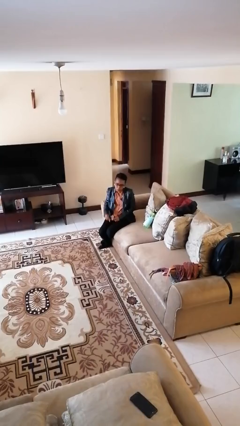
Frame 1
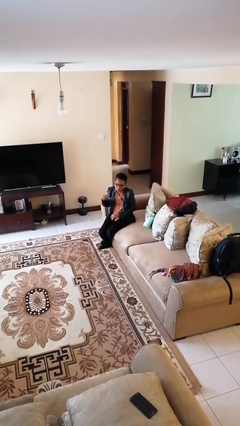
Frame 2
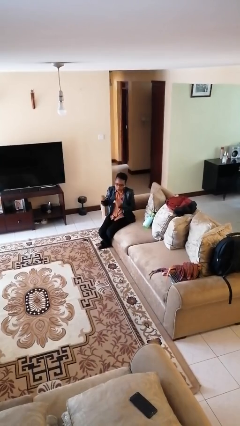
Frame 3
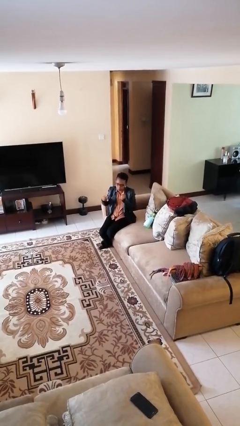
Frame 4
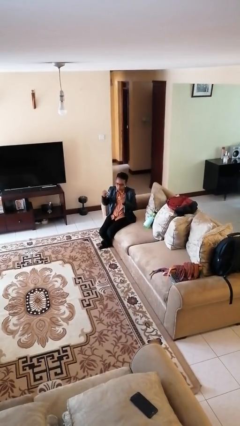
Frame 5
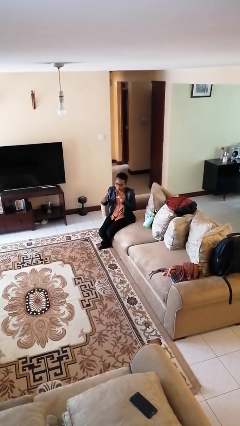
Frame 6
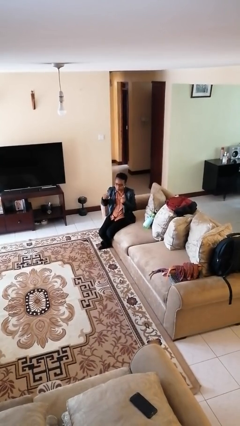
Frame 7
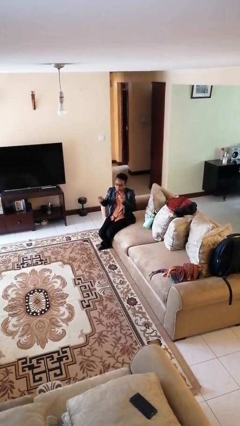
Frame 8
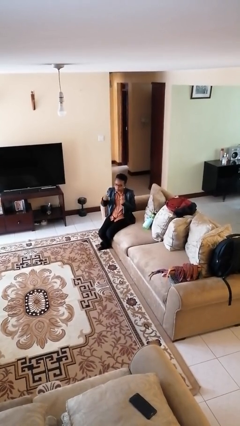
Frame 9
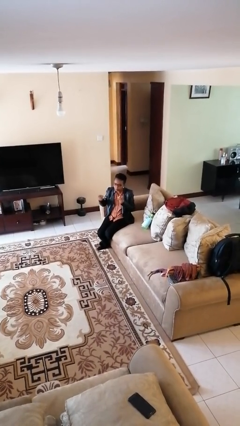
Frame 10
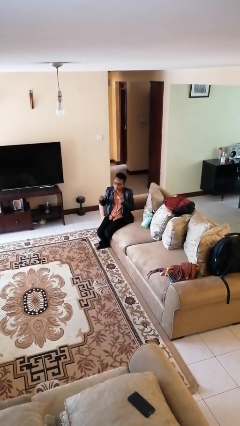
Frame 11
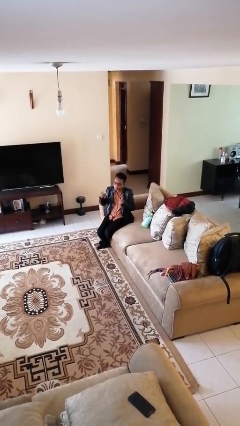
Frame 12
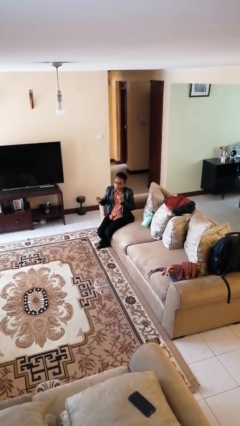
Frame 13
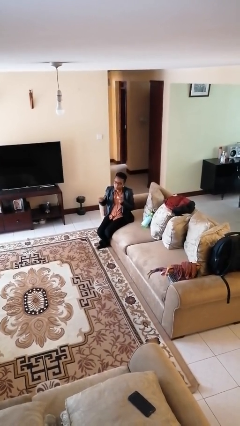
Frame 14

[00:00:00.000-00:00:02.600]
person snaps fingers

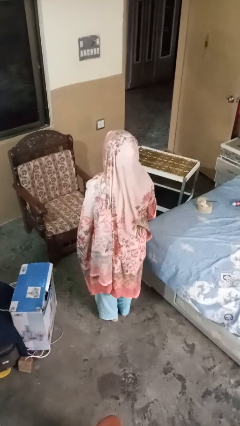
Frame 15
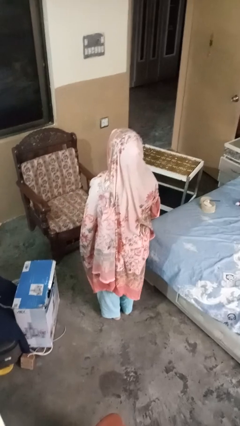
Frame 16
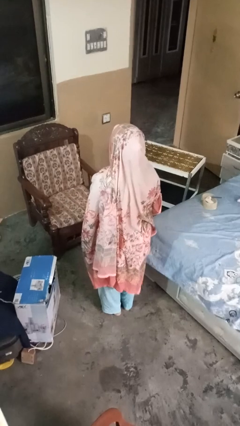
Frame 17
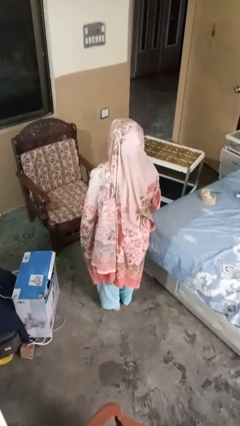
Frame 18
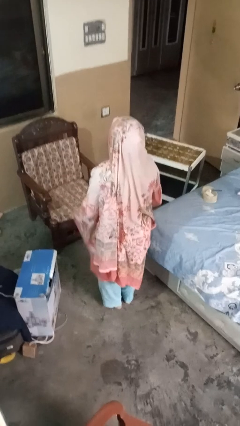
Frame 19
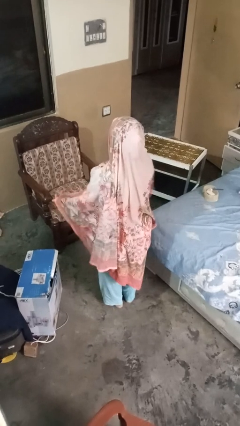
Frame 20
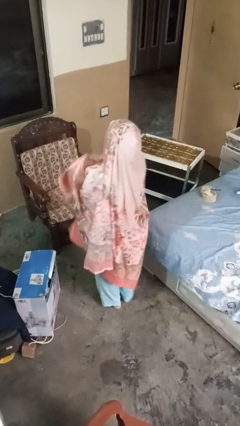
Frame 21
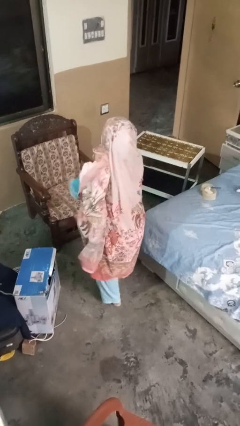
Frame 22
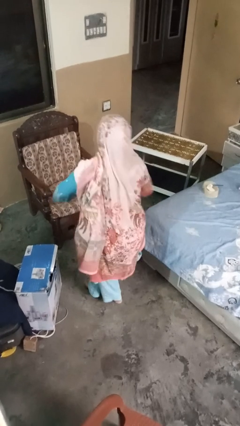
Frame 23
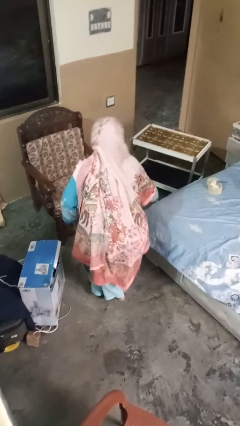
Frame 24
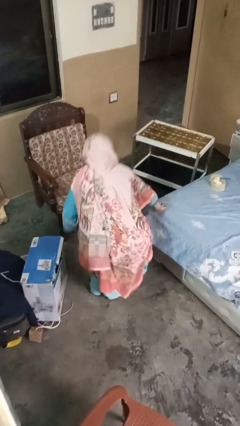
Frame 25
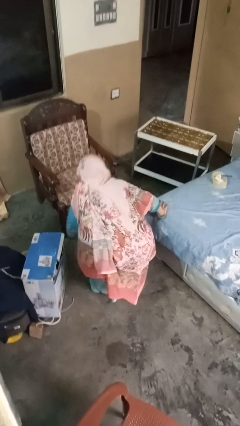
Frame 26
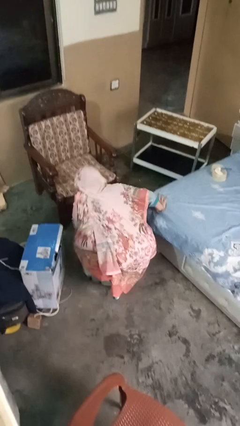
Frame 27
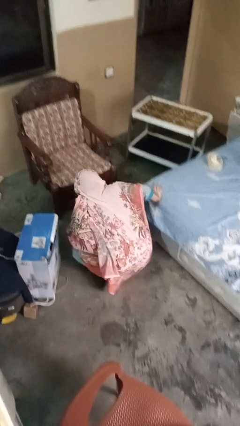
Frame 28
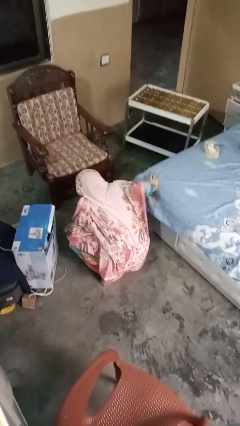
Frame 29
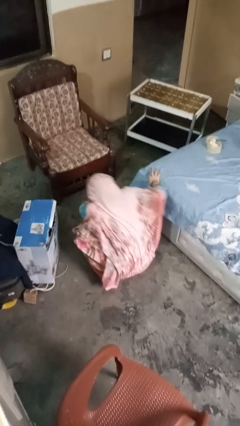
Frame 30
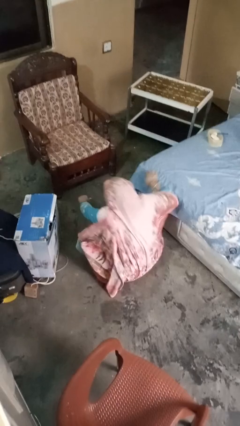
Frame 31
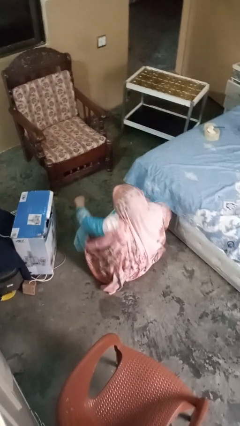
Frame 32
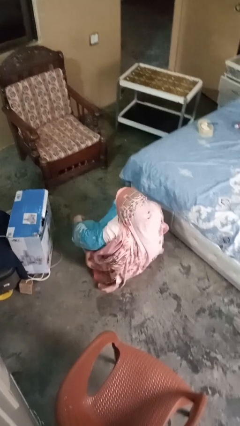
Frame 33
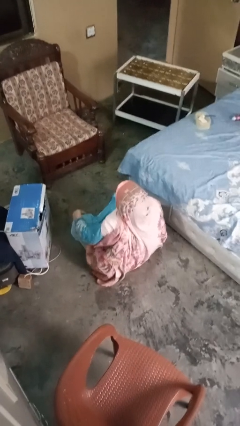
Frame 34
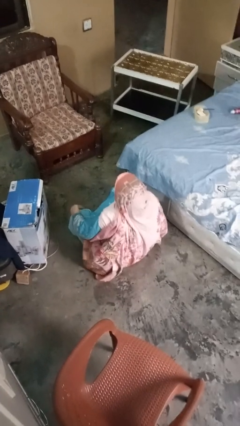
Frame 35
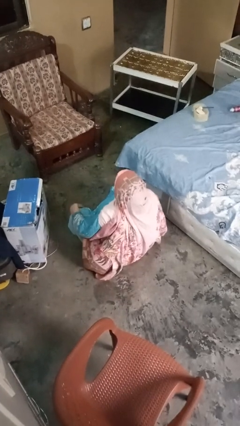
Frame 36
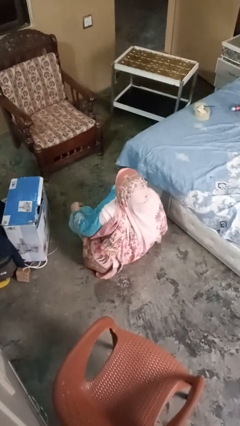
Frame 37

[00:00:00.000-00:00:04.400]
person crosses legs

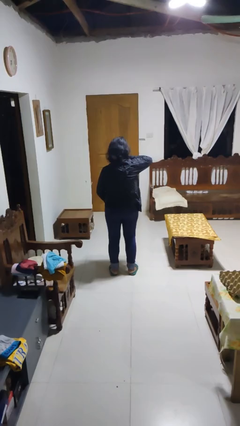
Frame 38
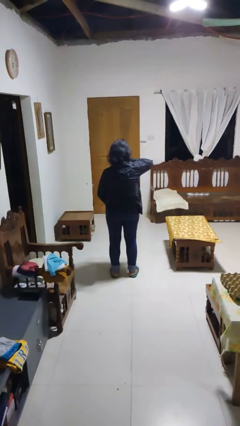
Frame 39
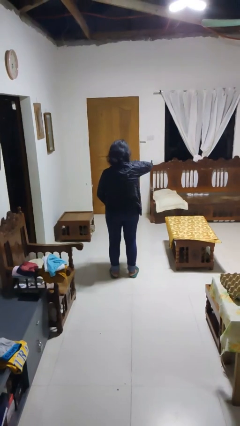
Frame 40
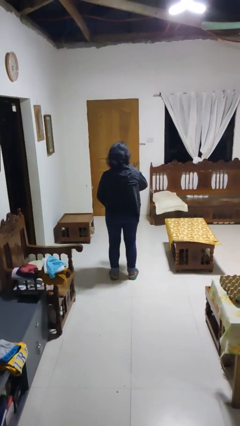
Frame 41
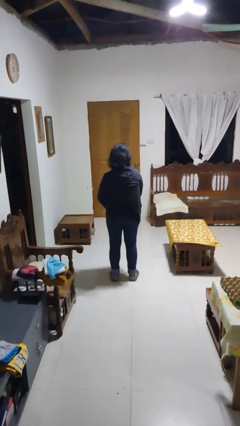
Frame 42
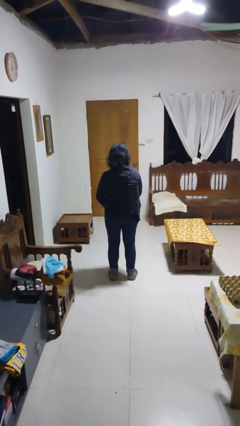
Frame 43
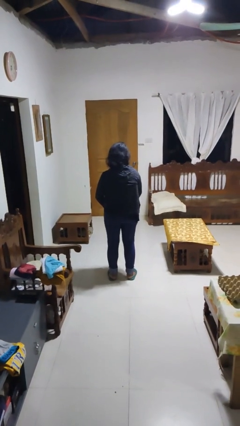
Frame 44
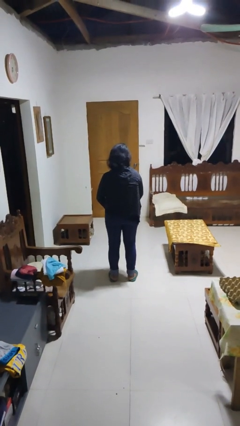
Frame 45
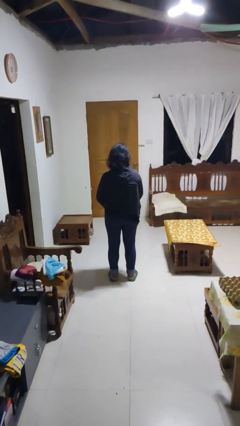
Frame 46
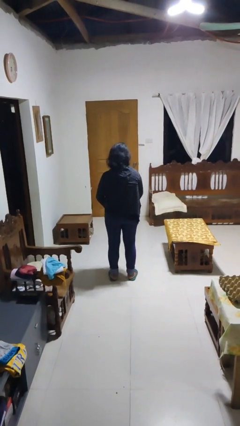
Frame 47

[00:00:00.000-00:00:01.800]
person unzips jacket

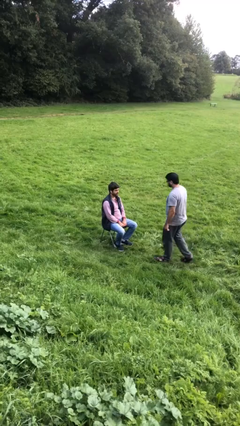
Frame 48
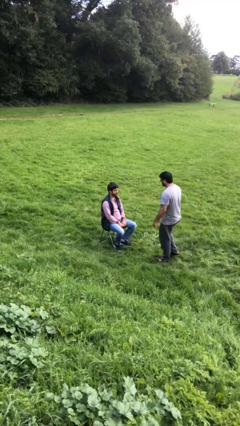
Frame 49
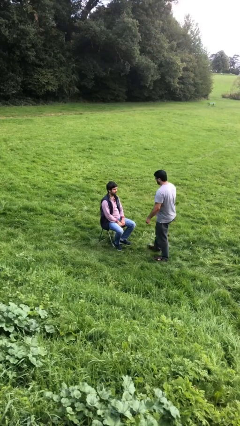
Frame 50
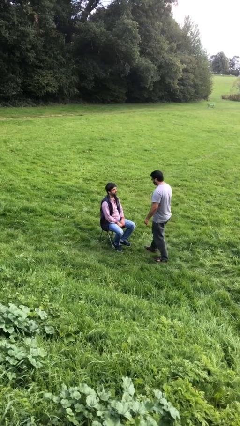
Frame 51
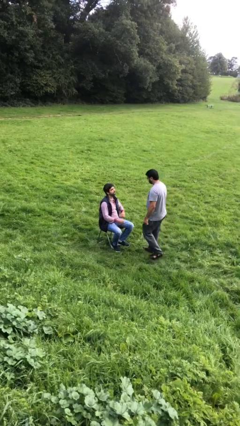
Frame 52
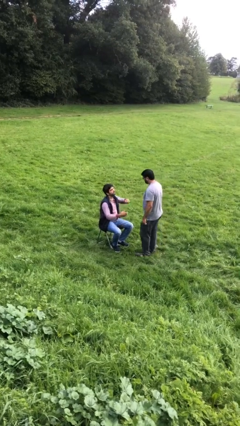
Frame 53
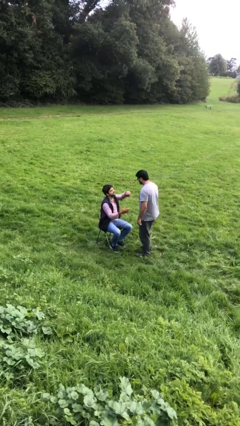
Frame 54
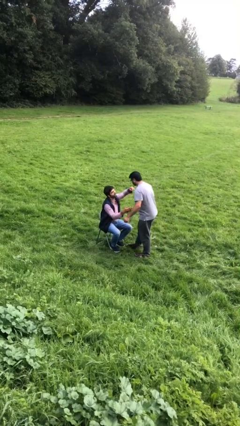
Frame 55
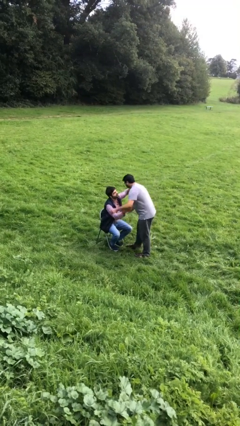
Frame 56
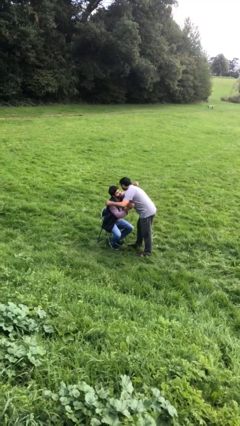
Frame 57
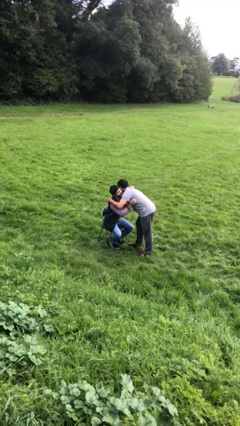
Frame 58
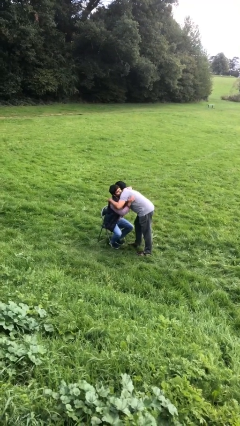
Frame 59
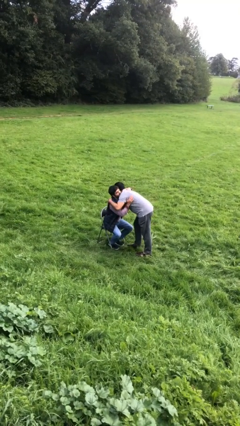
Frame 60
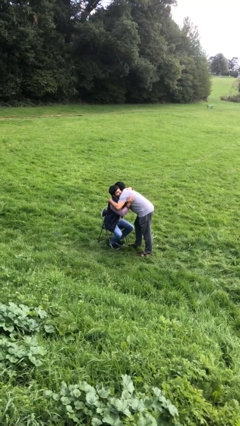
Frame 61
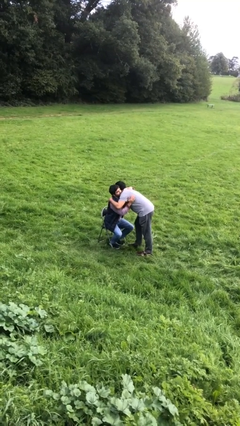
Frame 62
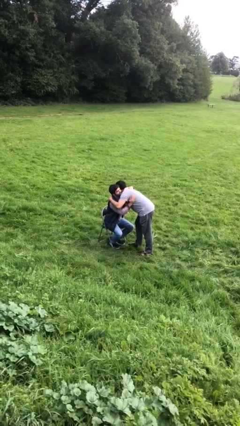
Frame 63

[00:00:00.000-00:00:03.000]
person embraces person

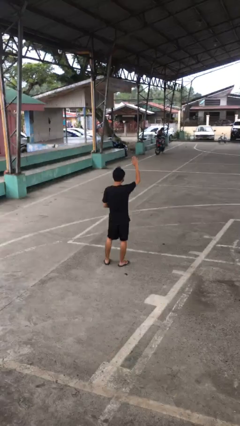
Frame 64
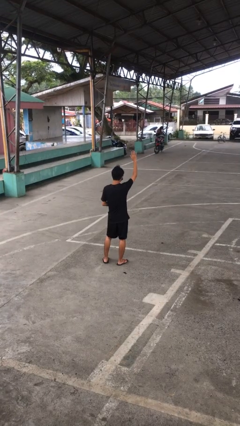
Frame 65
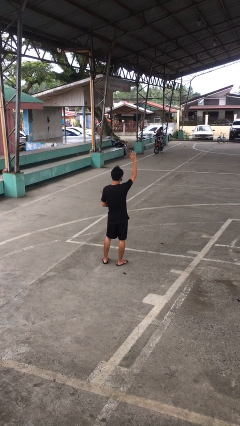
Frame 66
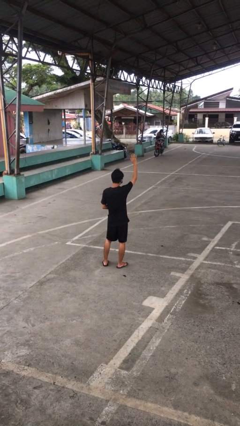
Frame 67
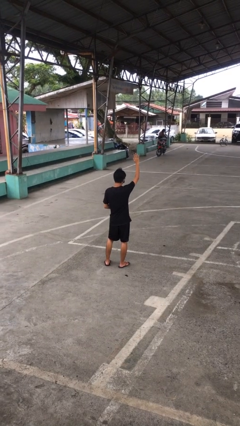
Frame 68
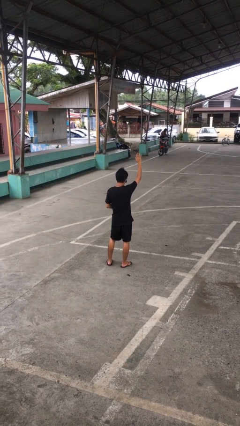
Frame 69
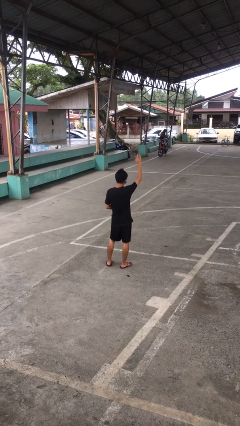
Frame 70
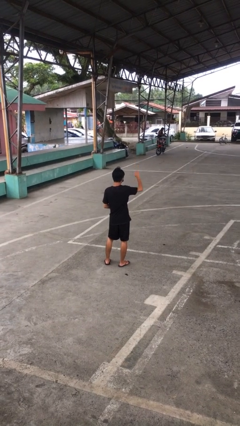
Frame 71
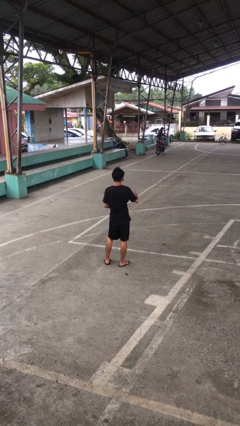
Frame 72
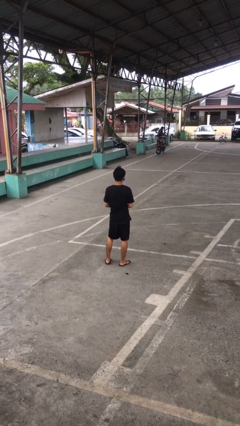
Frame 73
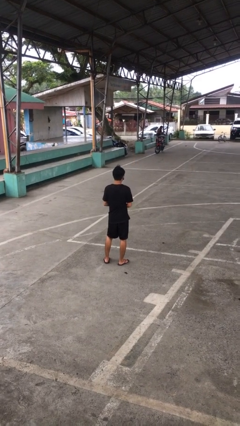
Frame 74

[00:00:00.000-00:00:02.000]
person gestures lower hand

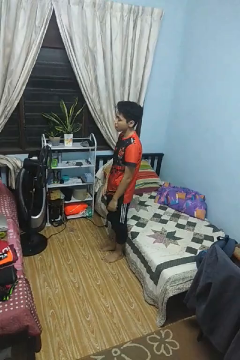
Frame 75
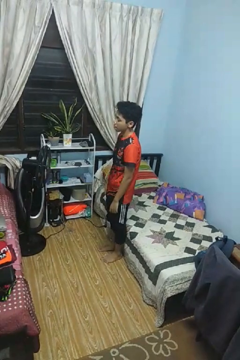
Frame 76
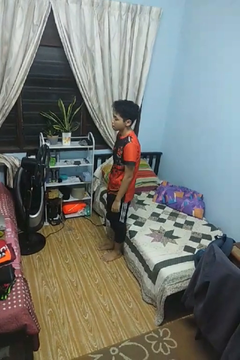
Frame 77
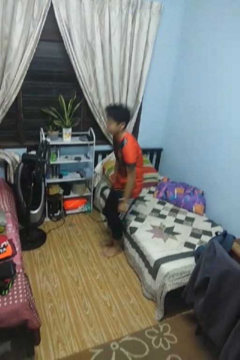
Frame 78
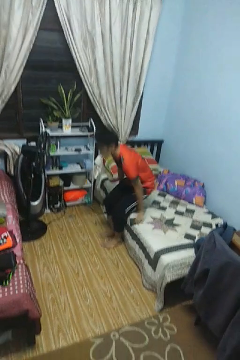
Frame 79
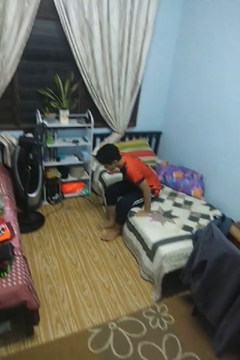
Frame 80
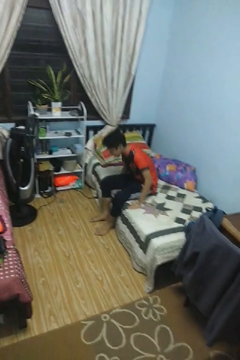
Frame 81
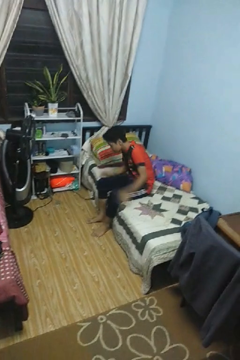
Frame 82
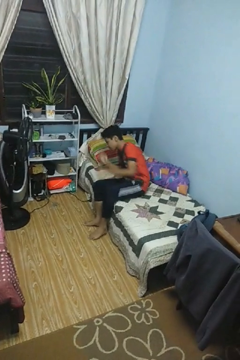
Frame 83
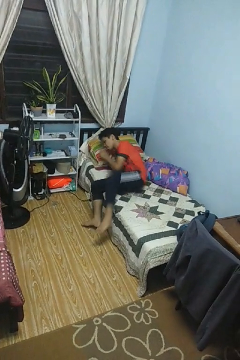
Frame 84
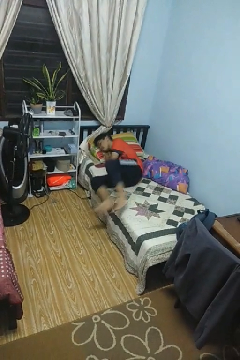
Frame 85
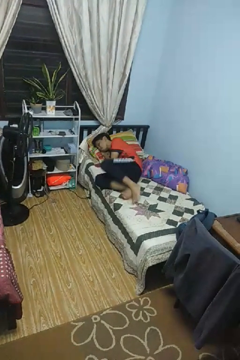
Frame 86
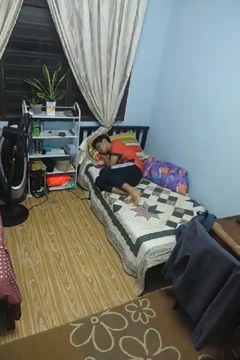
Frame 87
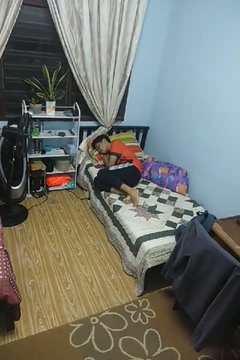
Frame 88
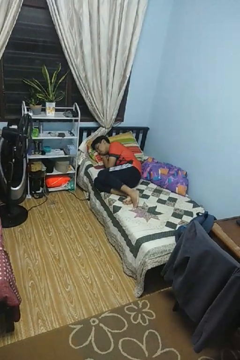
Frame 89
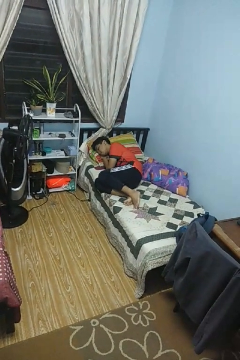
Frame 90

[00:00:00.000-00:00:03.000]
person lies down on bed

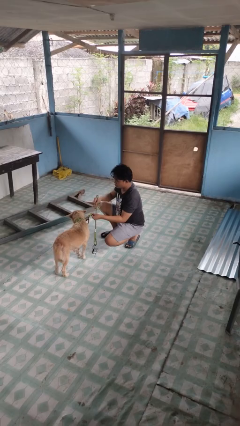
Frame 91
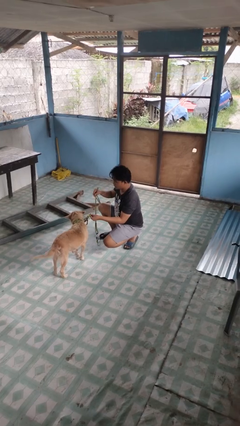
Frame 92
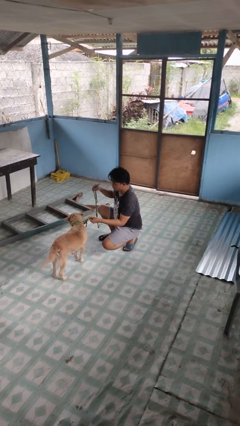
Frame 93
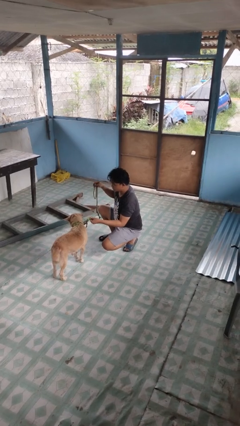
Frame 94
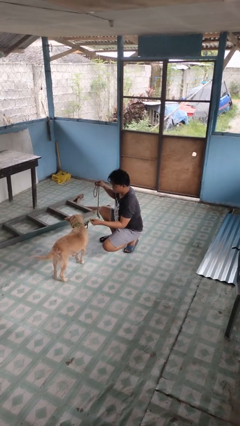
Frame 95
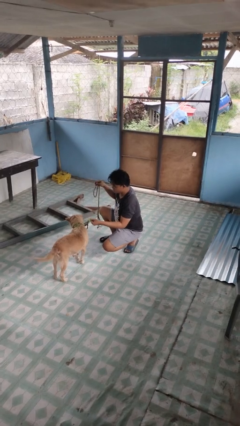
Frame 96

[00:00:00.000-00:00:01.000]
person unattaches leash from dog
